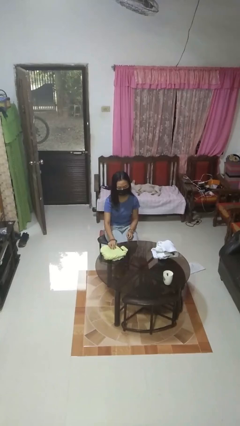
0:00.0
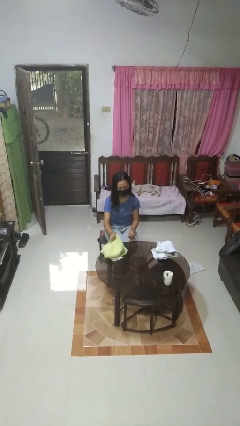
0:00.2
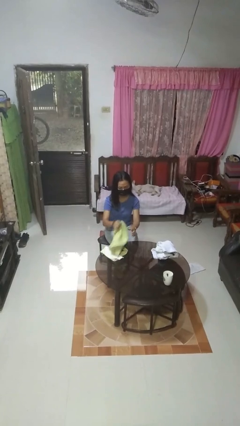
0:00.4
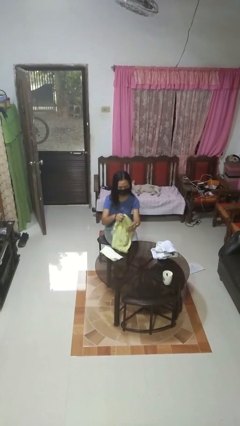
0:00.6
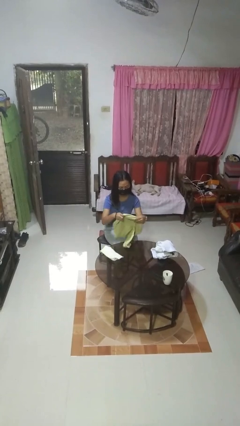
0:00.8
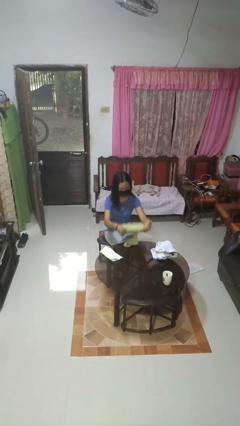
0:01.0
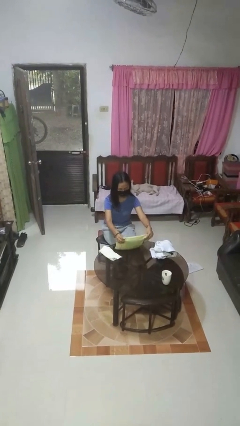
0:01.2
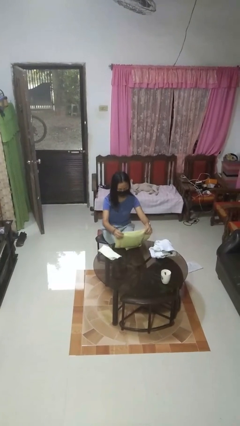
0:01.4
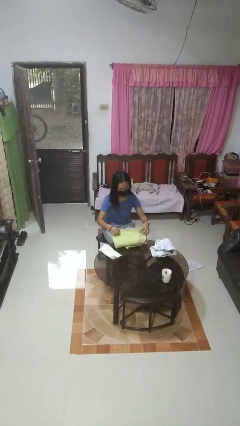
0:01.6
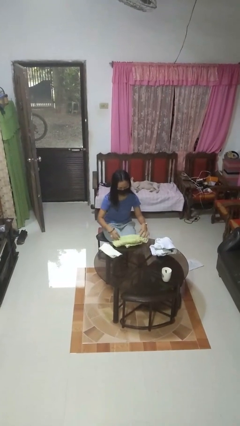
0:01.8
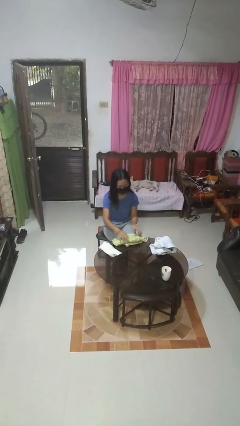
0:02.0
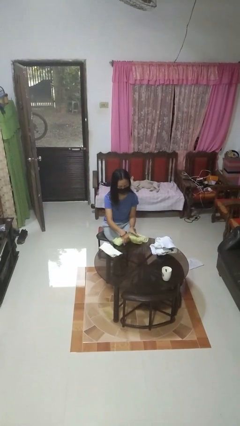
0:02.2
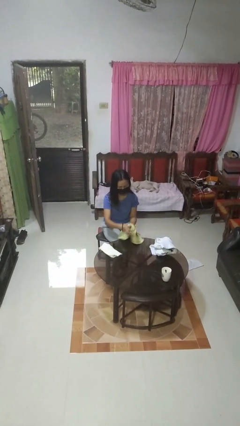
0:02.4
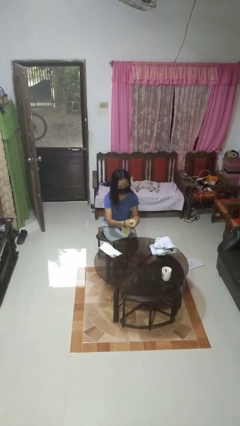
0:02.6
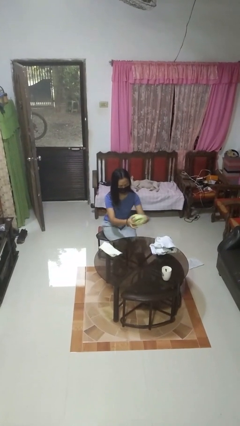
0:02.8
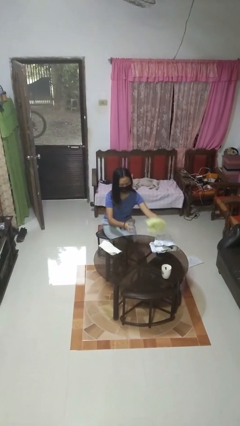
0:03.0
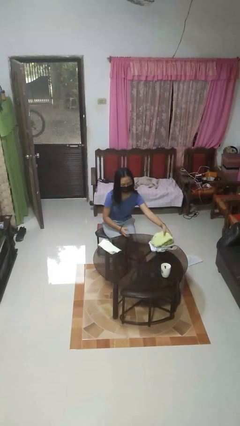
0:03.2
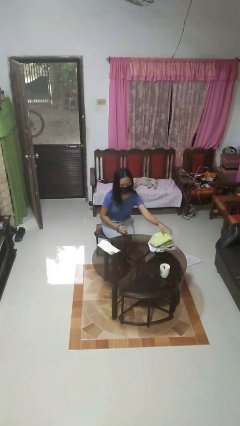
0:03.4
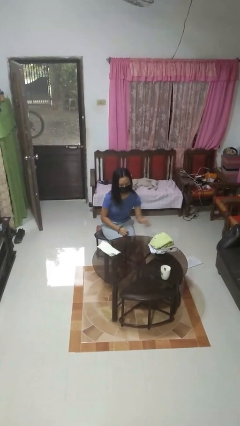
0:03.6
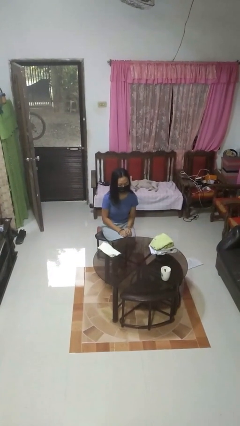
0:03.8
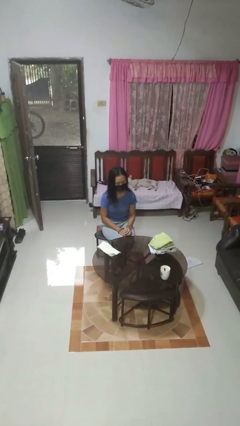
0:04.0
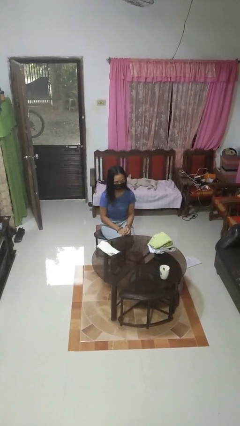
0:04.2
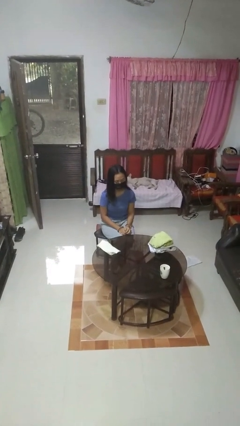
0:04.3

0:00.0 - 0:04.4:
person folds towel

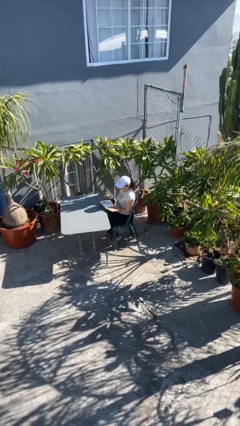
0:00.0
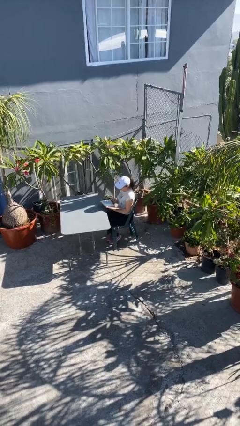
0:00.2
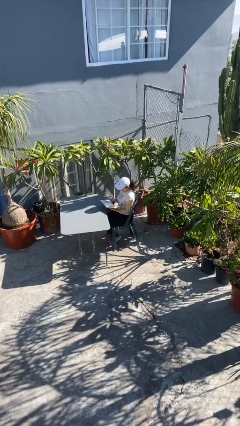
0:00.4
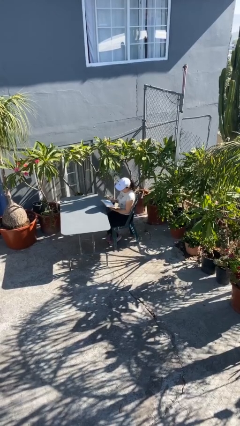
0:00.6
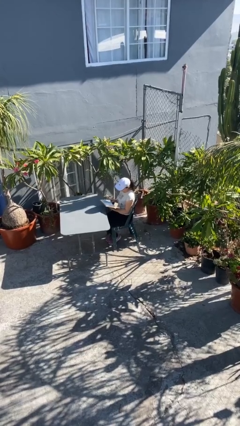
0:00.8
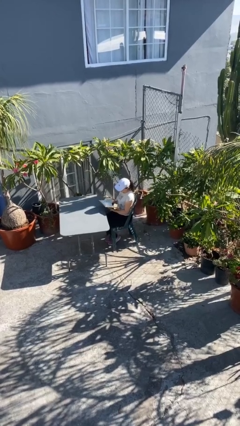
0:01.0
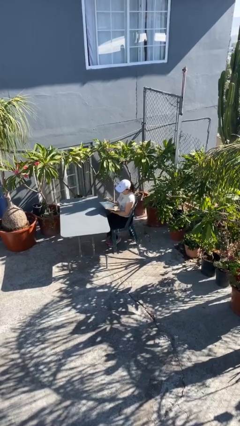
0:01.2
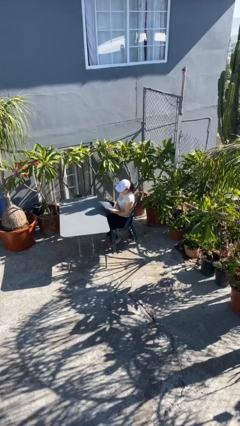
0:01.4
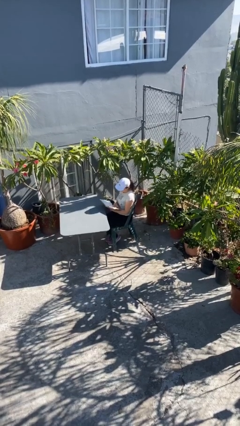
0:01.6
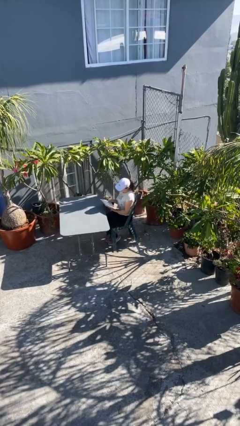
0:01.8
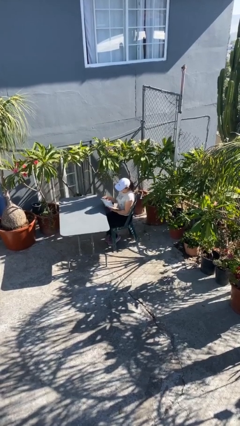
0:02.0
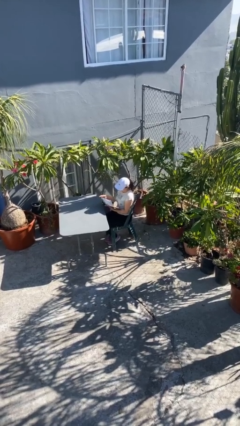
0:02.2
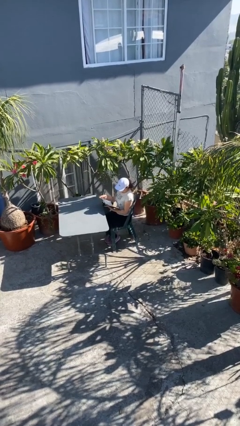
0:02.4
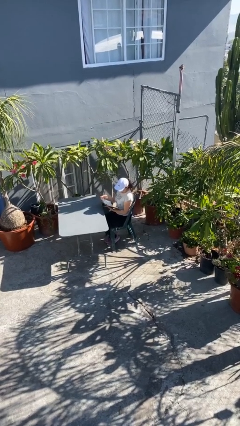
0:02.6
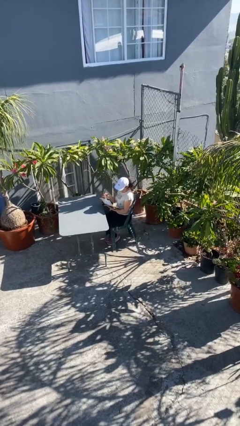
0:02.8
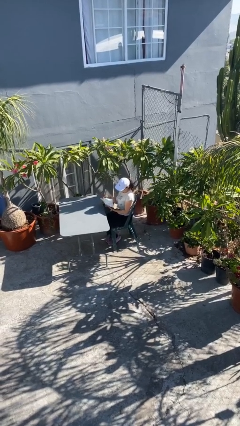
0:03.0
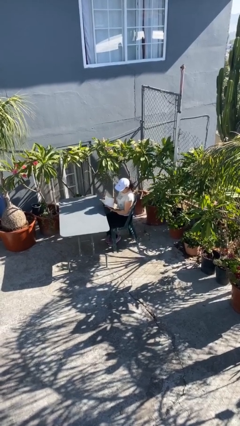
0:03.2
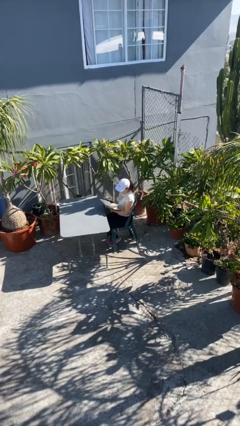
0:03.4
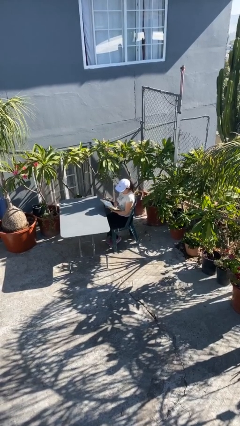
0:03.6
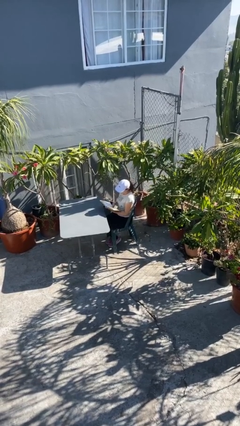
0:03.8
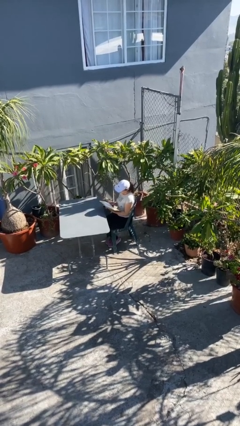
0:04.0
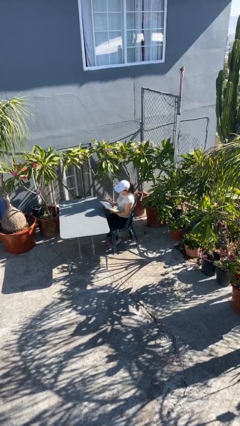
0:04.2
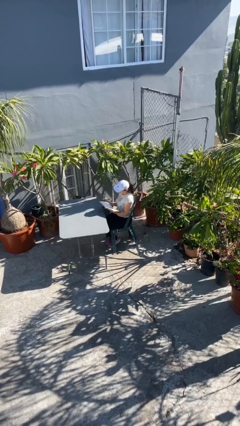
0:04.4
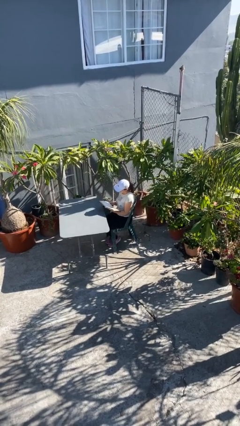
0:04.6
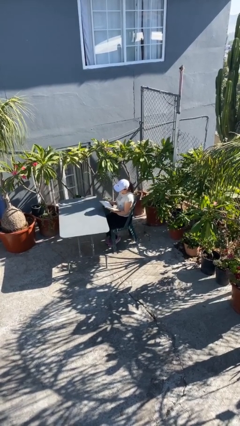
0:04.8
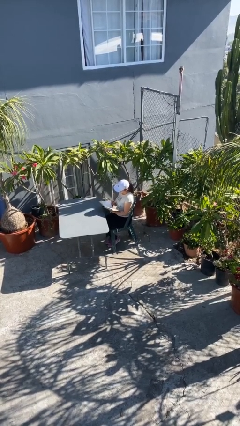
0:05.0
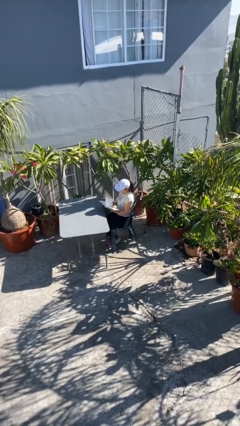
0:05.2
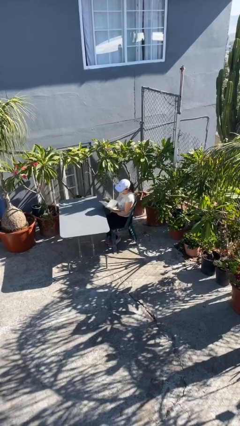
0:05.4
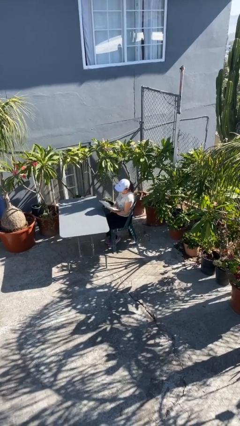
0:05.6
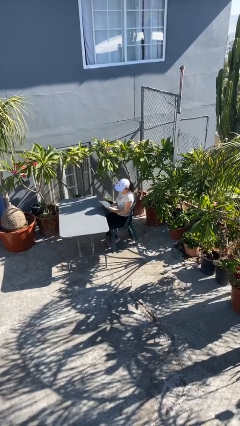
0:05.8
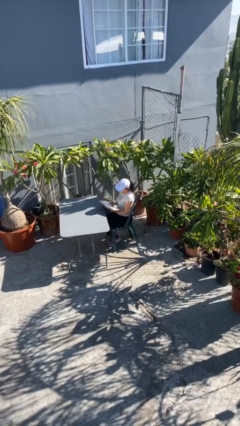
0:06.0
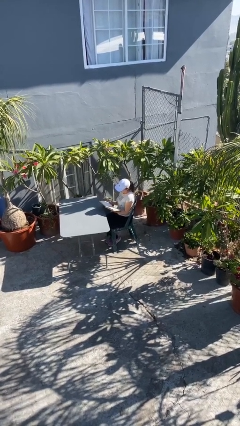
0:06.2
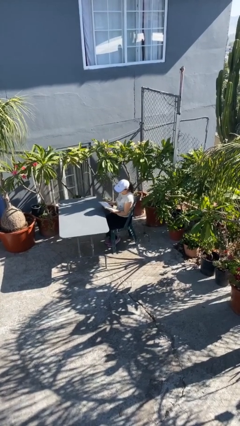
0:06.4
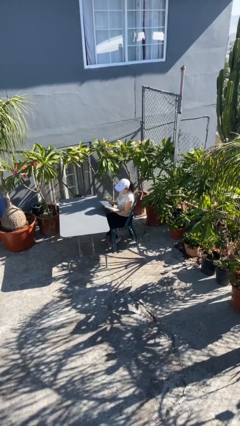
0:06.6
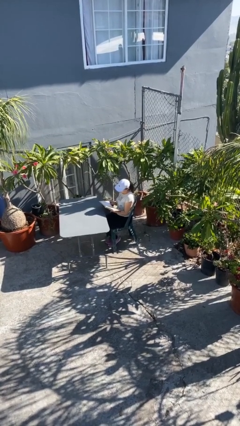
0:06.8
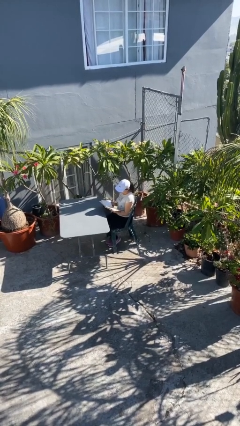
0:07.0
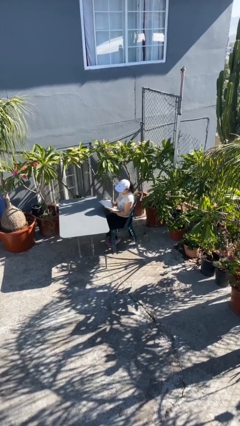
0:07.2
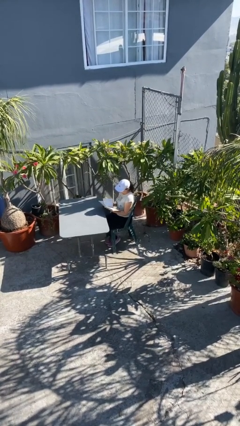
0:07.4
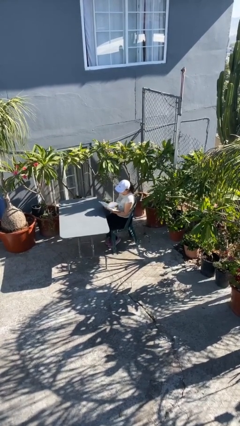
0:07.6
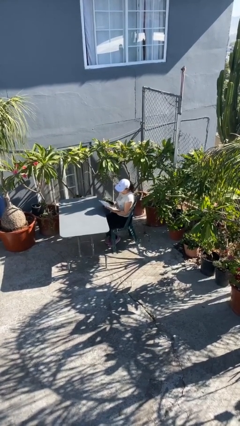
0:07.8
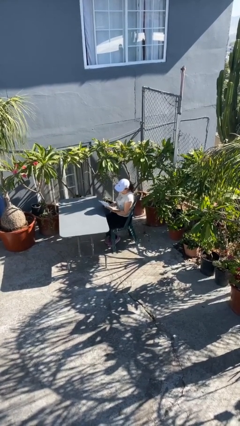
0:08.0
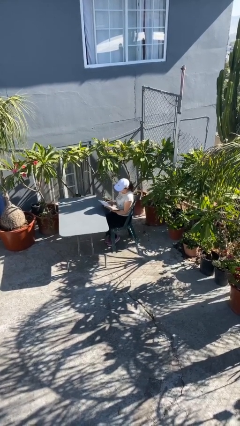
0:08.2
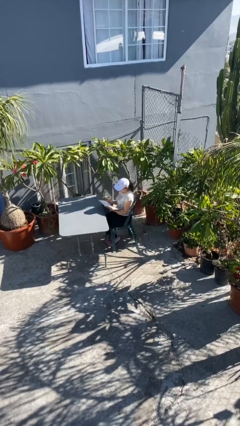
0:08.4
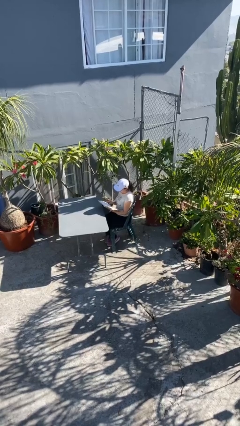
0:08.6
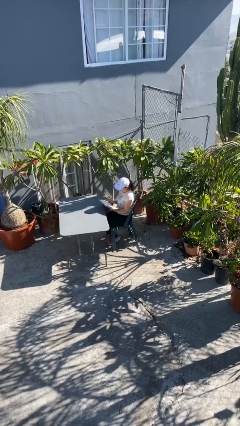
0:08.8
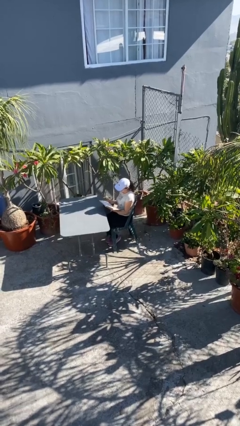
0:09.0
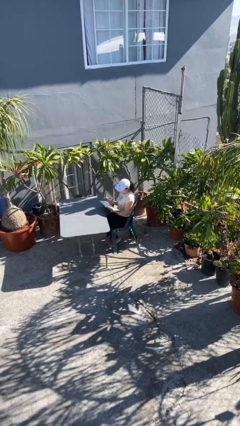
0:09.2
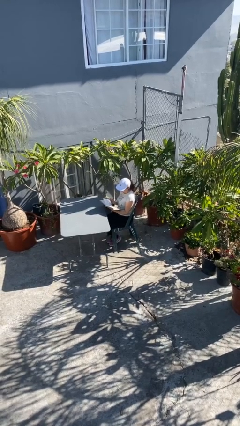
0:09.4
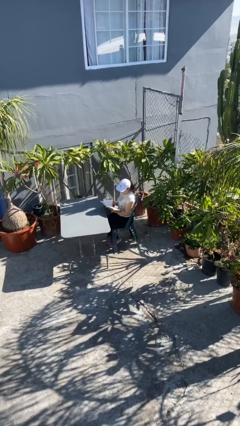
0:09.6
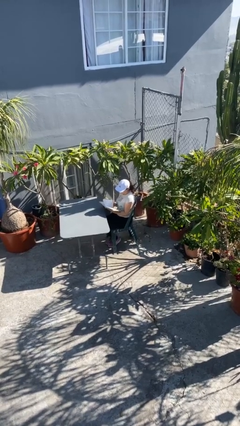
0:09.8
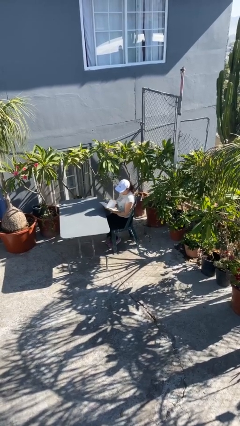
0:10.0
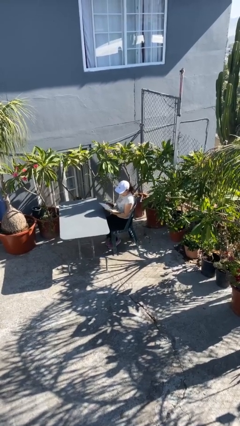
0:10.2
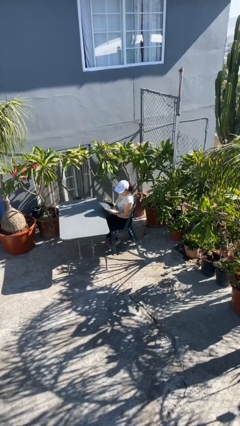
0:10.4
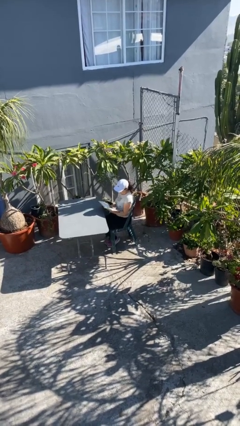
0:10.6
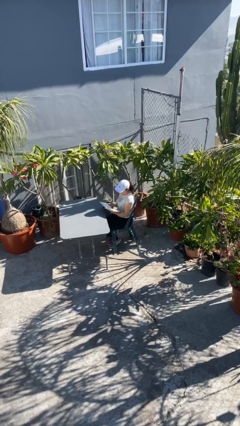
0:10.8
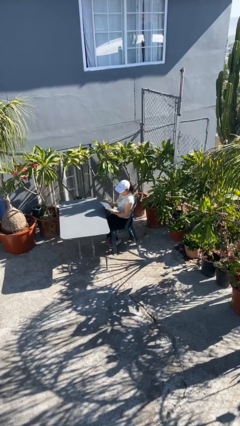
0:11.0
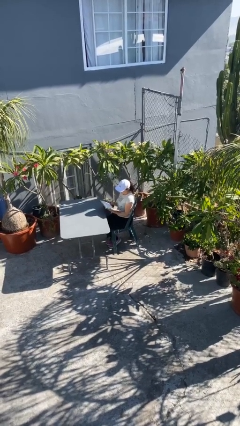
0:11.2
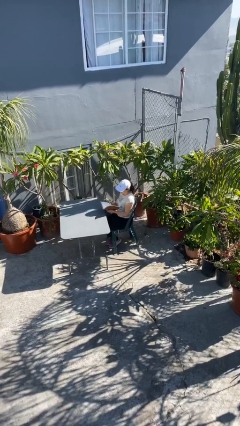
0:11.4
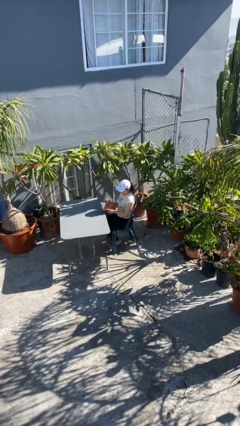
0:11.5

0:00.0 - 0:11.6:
person reads document

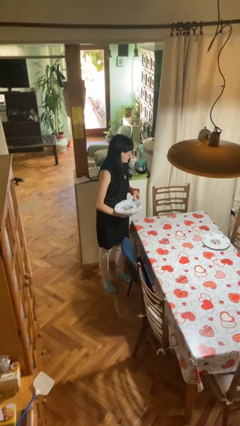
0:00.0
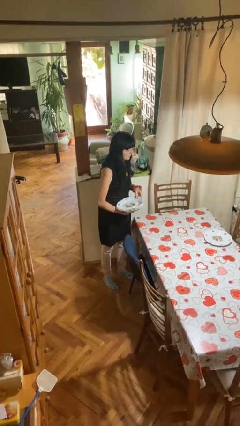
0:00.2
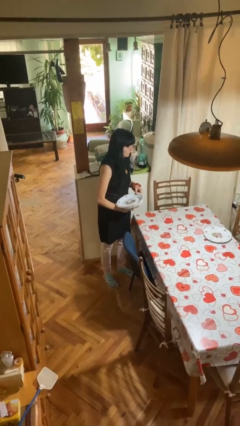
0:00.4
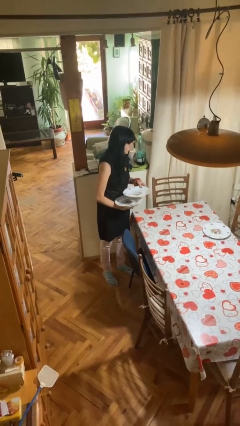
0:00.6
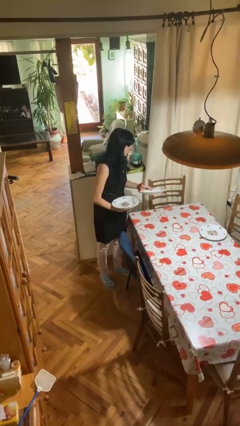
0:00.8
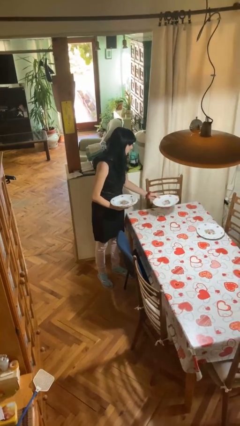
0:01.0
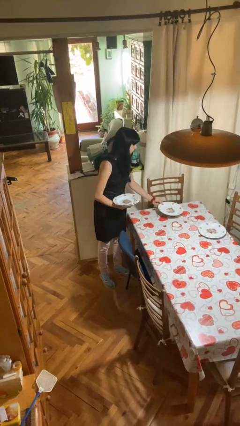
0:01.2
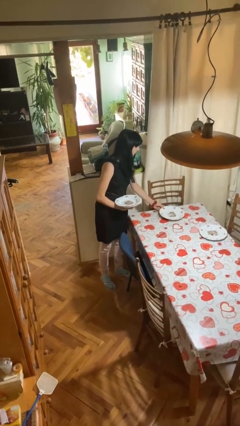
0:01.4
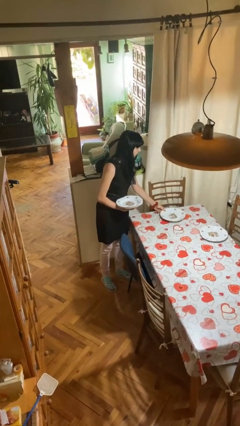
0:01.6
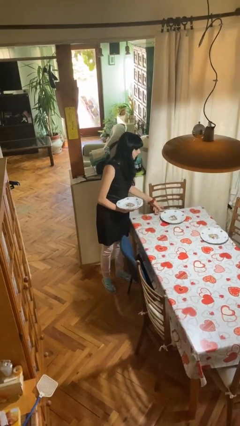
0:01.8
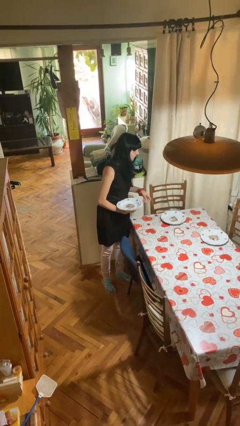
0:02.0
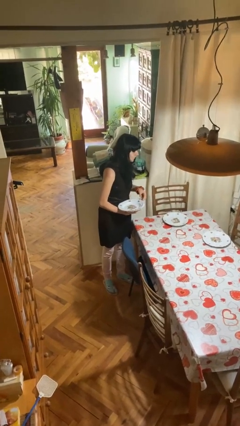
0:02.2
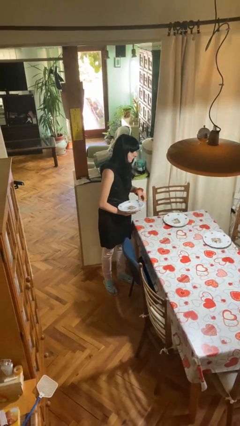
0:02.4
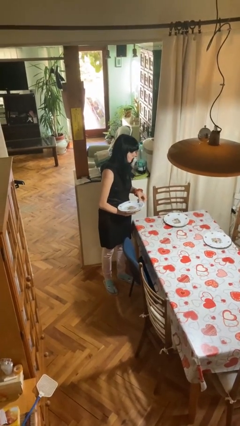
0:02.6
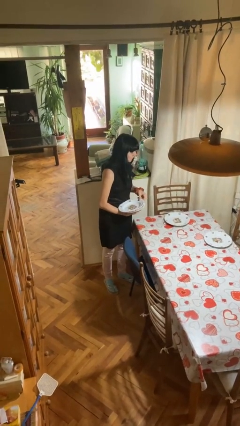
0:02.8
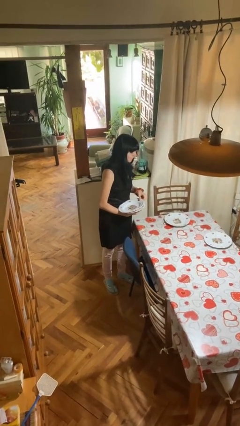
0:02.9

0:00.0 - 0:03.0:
person sets table
